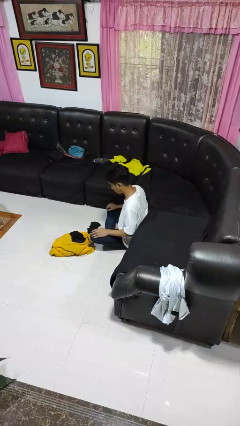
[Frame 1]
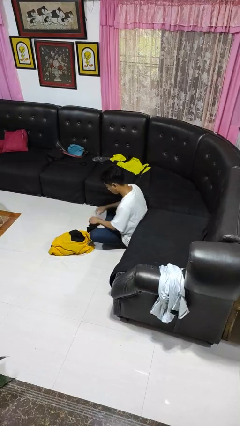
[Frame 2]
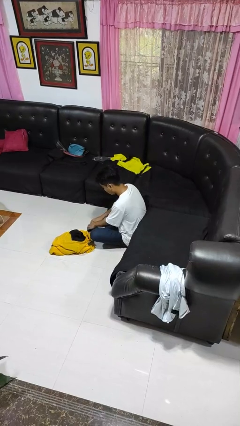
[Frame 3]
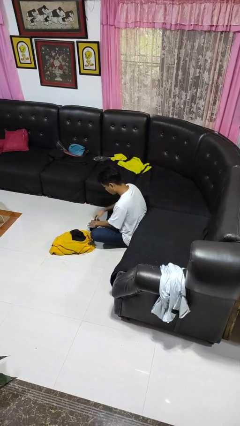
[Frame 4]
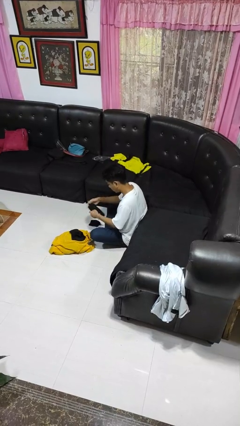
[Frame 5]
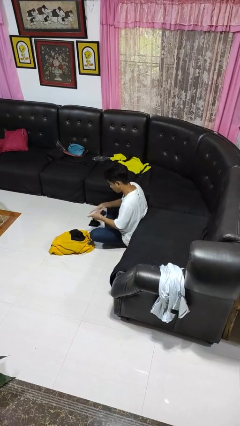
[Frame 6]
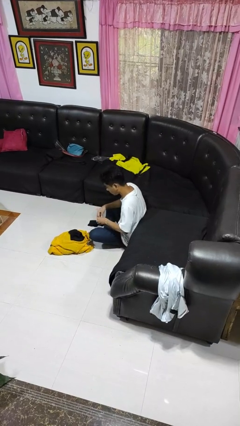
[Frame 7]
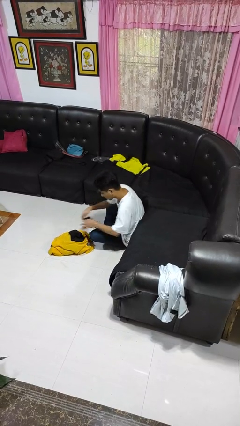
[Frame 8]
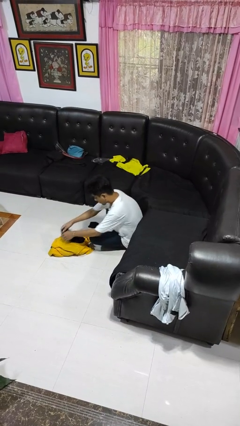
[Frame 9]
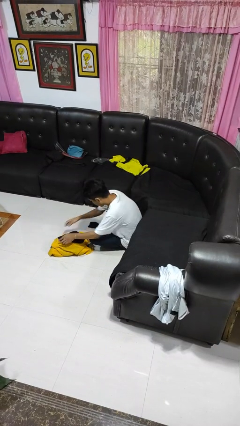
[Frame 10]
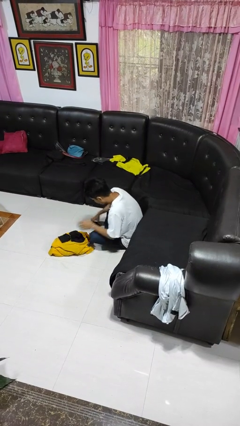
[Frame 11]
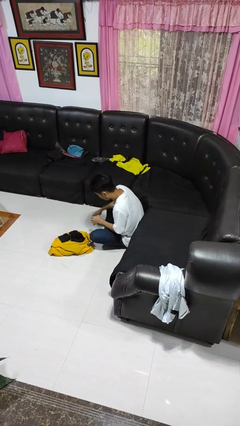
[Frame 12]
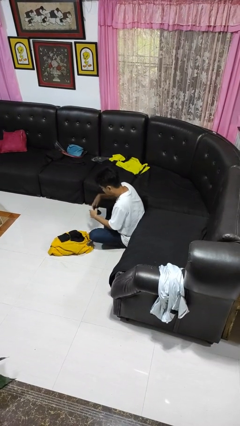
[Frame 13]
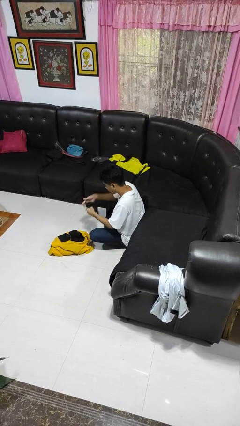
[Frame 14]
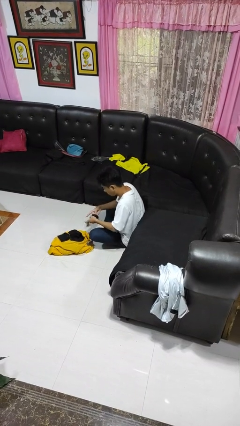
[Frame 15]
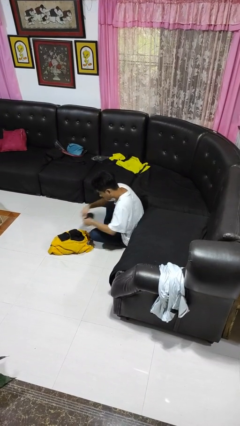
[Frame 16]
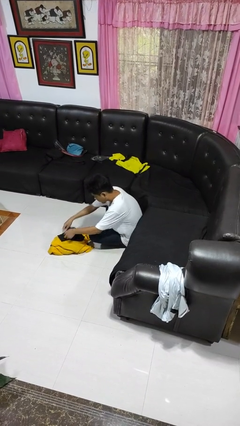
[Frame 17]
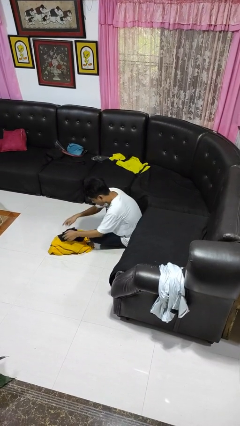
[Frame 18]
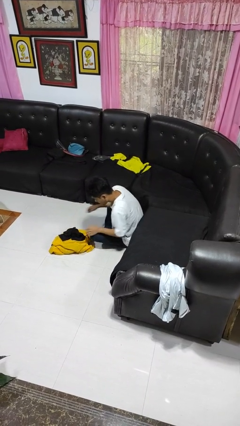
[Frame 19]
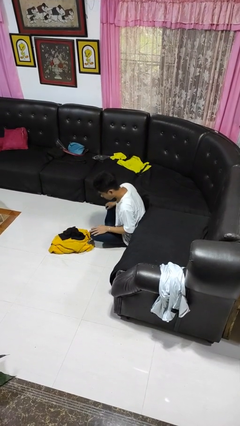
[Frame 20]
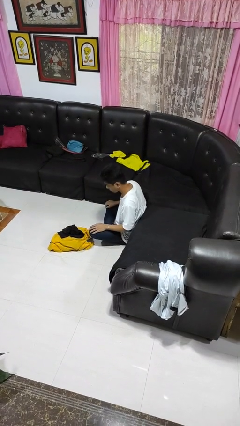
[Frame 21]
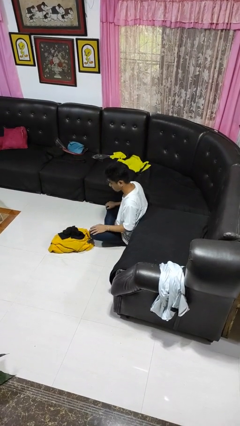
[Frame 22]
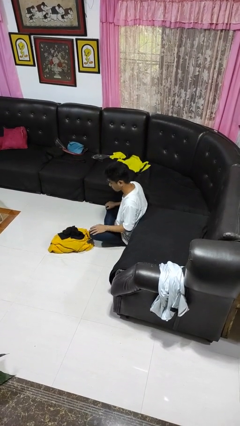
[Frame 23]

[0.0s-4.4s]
person folds socks

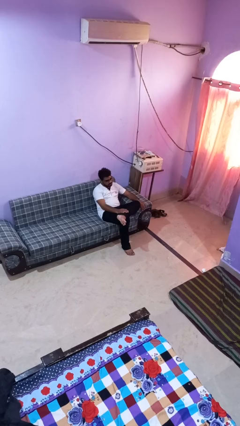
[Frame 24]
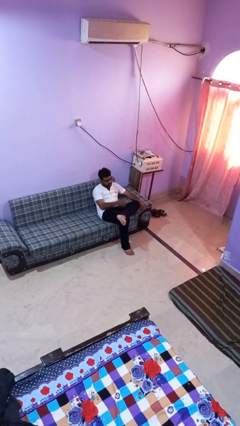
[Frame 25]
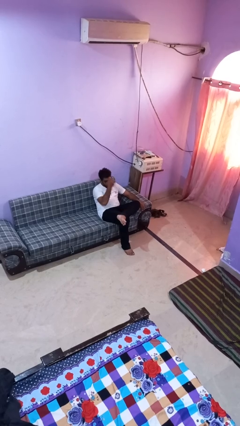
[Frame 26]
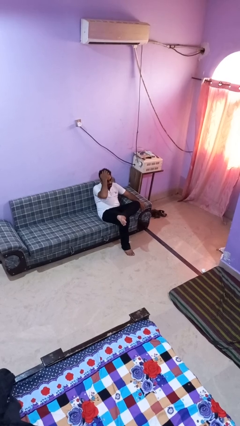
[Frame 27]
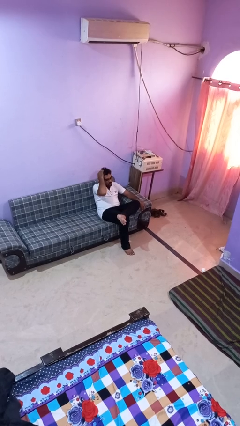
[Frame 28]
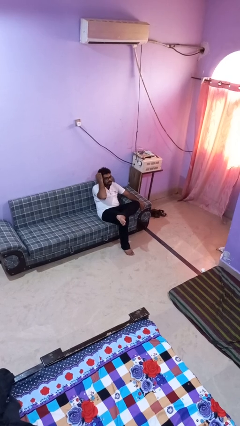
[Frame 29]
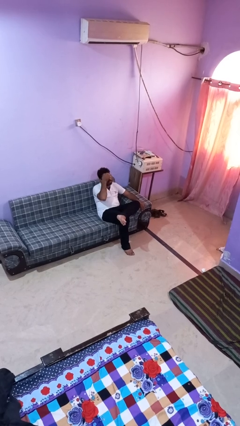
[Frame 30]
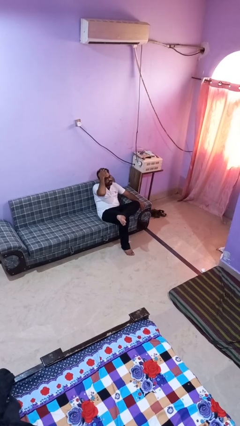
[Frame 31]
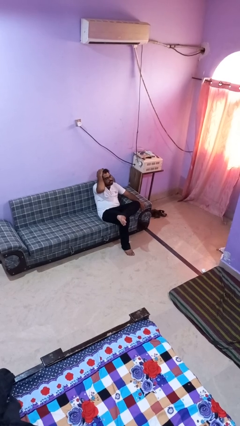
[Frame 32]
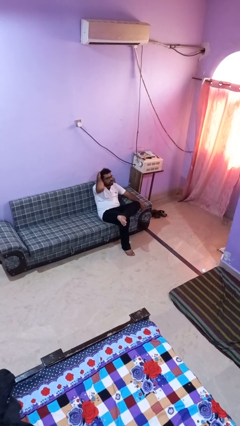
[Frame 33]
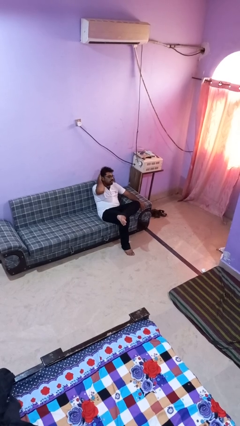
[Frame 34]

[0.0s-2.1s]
person strokes hair

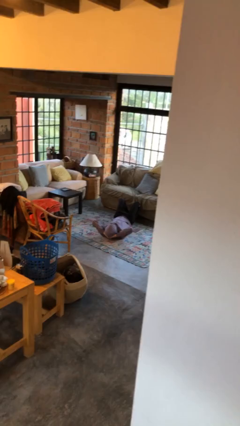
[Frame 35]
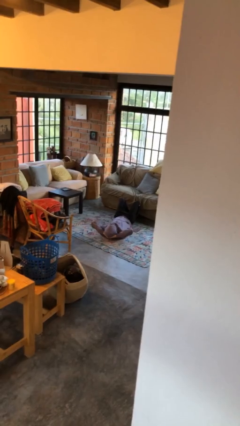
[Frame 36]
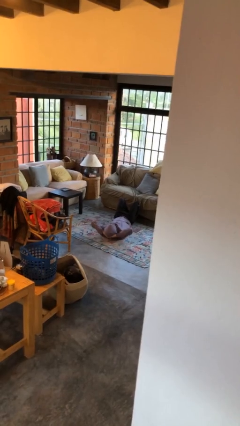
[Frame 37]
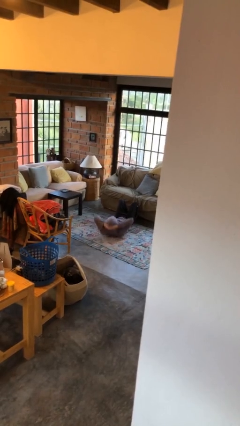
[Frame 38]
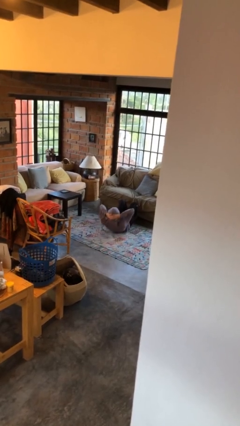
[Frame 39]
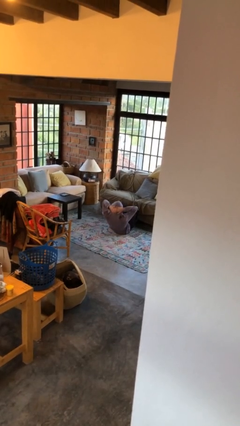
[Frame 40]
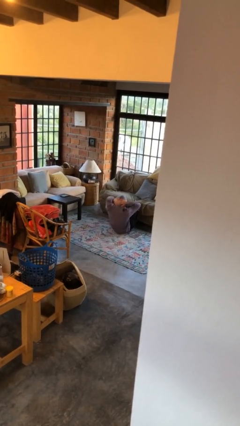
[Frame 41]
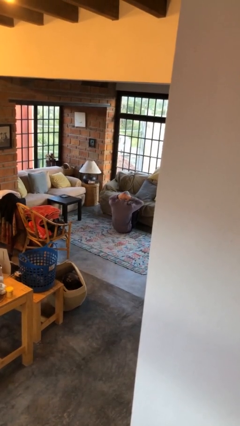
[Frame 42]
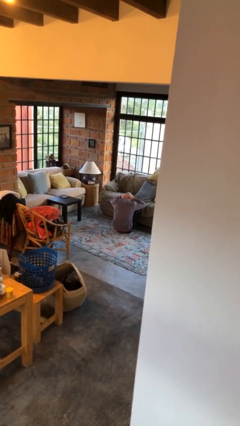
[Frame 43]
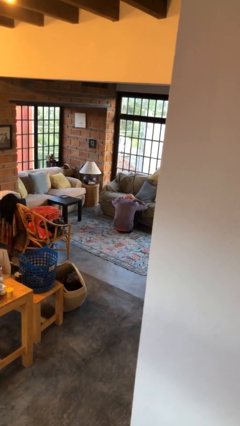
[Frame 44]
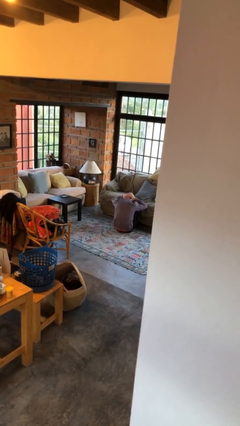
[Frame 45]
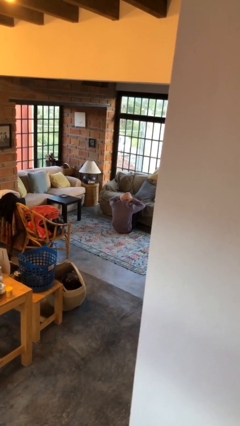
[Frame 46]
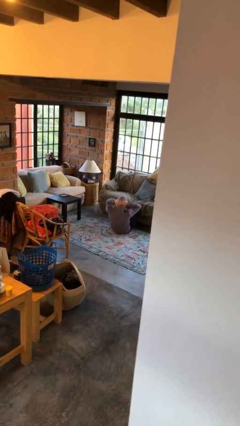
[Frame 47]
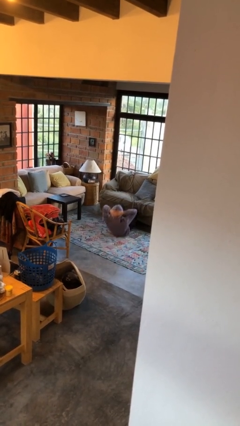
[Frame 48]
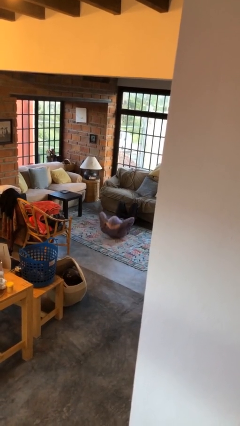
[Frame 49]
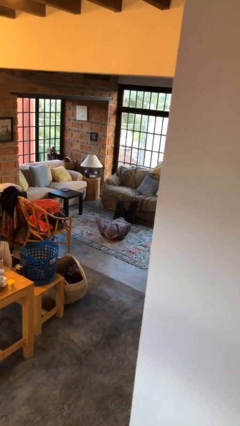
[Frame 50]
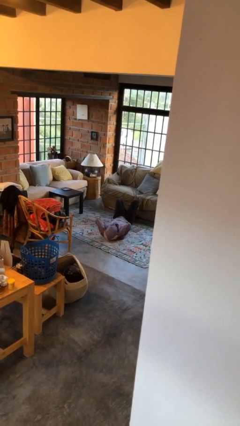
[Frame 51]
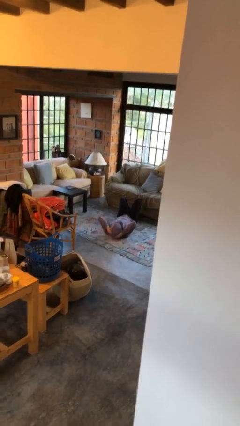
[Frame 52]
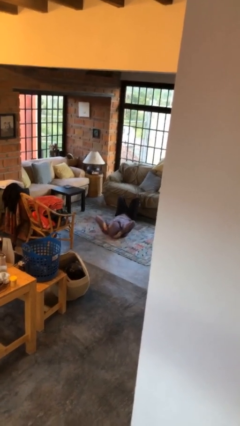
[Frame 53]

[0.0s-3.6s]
person exercises with situp

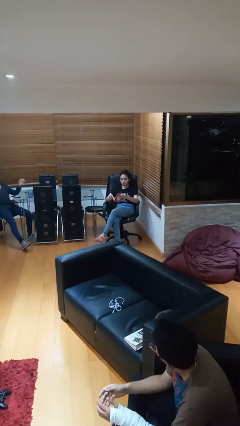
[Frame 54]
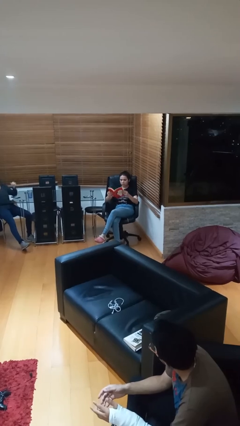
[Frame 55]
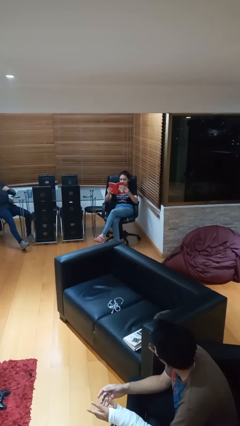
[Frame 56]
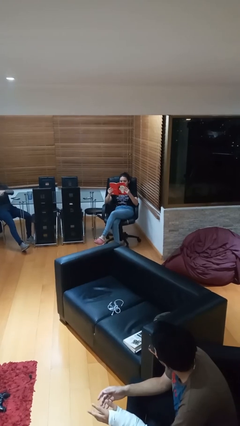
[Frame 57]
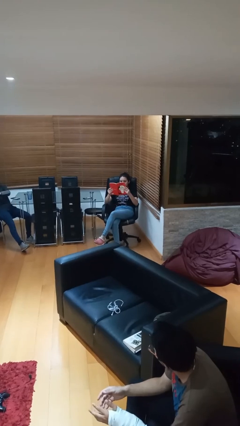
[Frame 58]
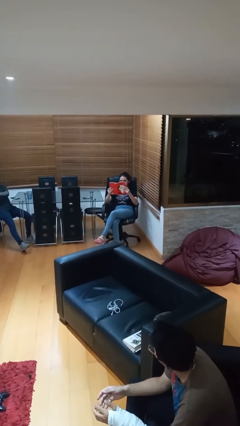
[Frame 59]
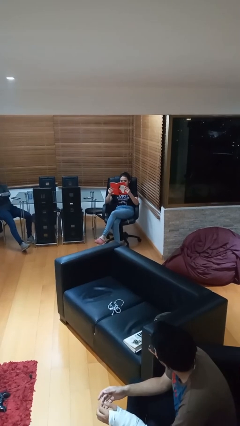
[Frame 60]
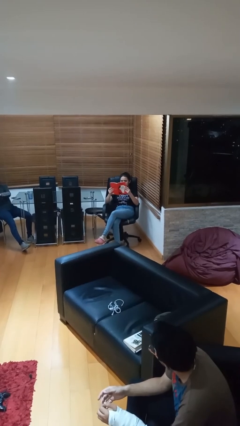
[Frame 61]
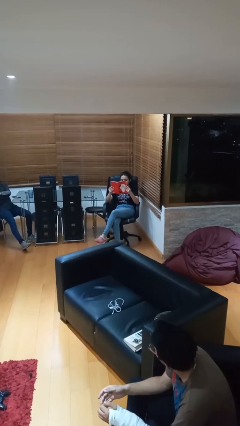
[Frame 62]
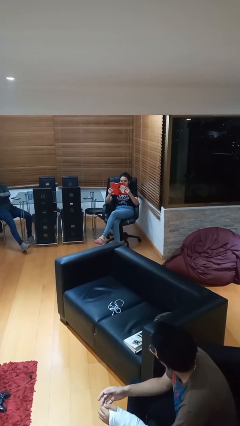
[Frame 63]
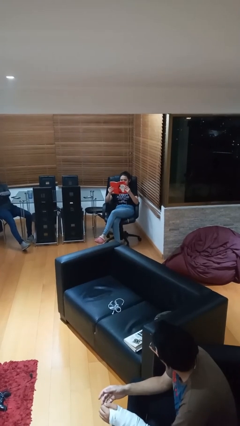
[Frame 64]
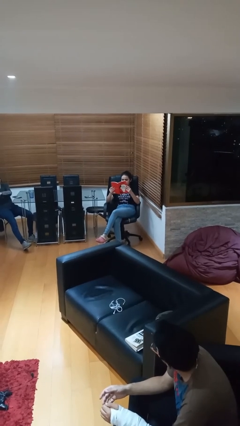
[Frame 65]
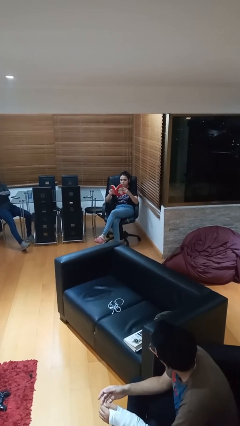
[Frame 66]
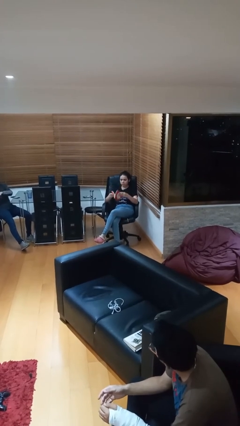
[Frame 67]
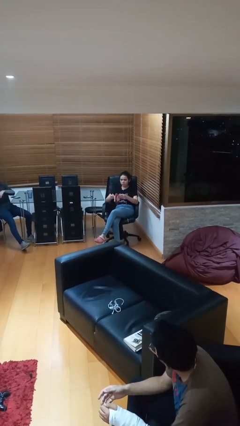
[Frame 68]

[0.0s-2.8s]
person reads document

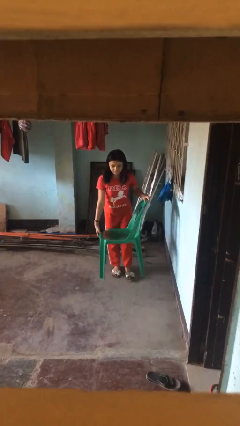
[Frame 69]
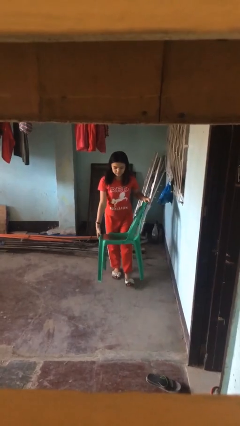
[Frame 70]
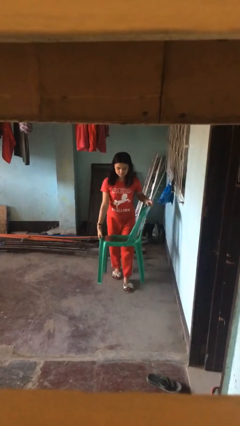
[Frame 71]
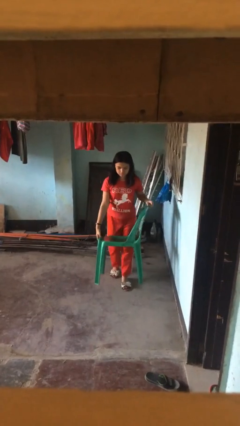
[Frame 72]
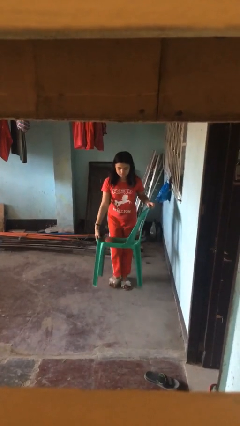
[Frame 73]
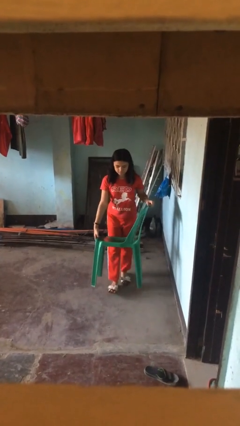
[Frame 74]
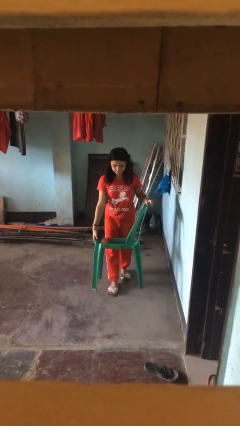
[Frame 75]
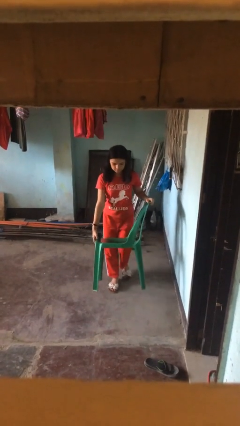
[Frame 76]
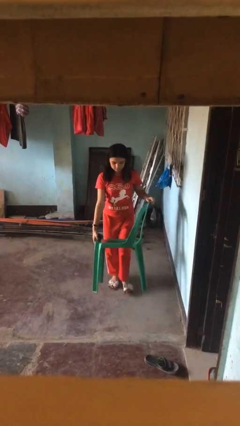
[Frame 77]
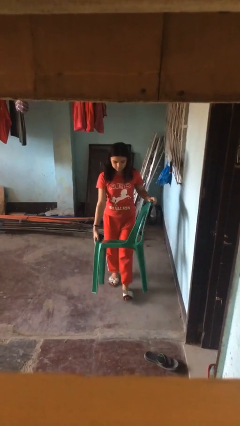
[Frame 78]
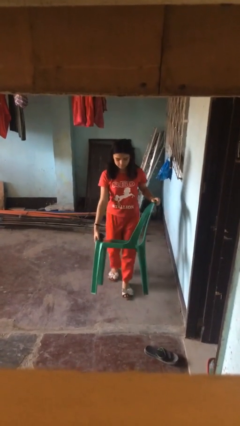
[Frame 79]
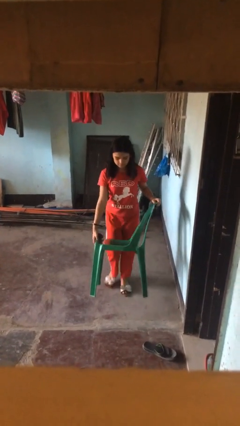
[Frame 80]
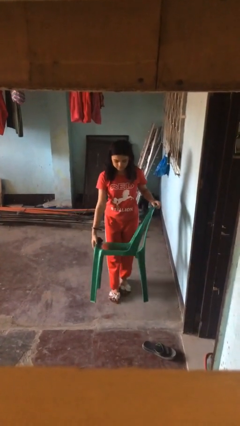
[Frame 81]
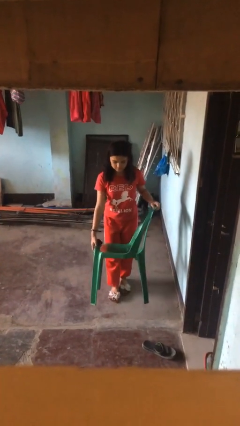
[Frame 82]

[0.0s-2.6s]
person carries heavy object

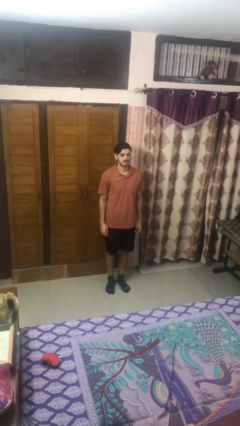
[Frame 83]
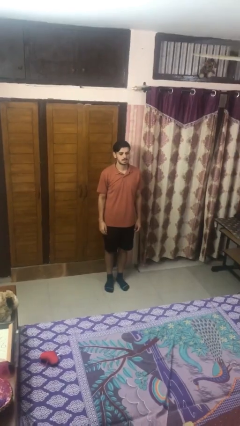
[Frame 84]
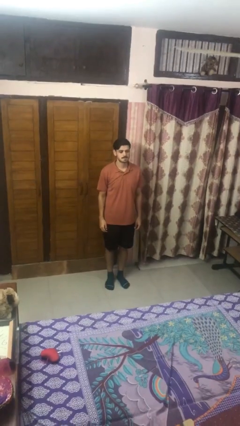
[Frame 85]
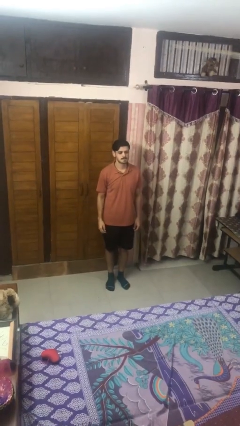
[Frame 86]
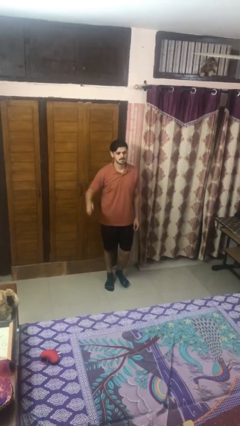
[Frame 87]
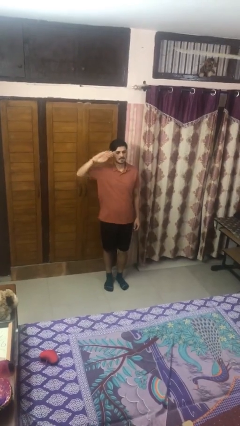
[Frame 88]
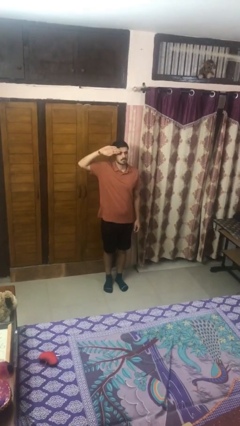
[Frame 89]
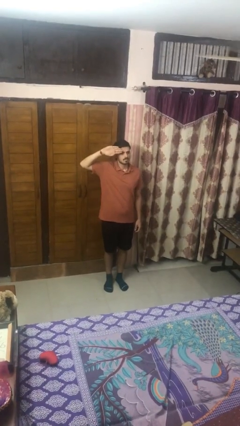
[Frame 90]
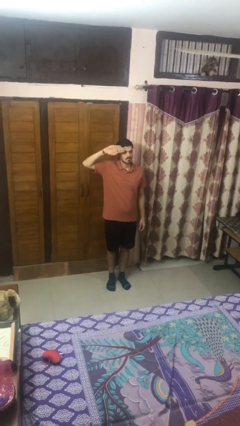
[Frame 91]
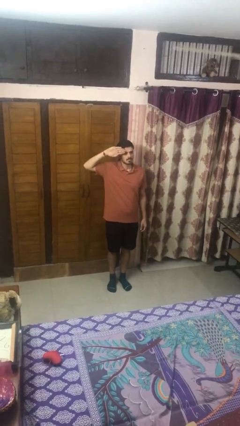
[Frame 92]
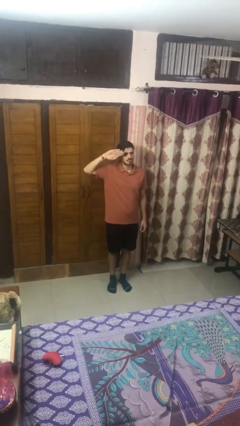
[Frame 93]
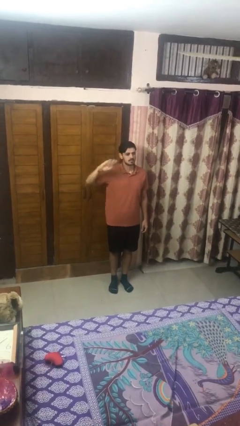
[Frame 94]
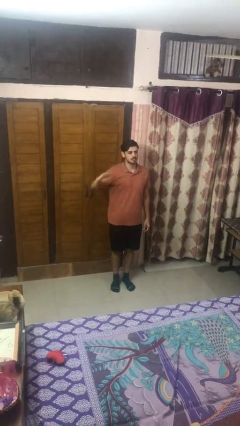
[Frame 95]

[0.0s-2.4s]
person salutes
